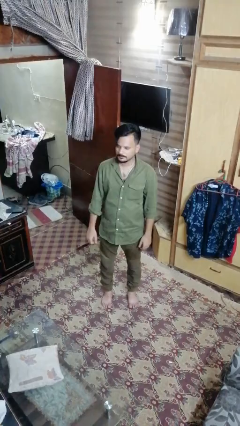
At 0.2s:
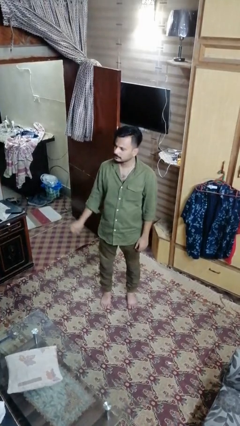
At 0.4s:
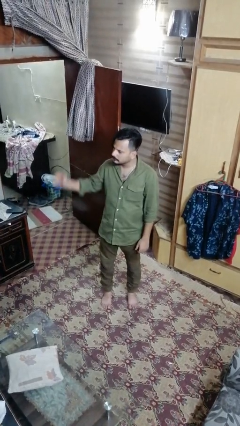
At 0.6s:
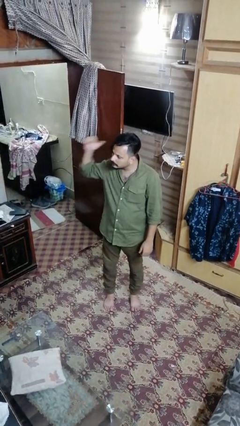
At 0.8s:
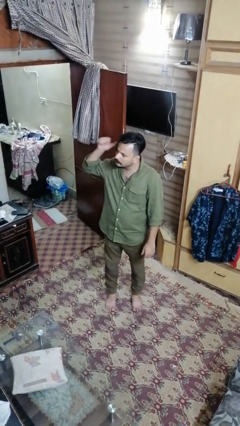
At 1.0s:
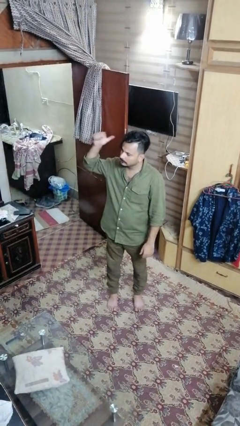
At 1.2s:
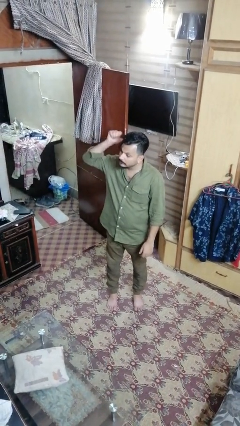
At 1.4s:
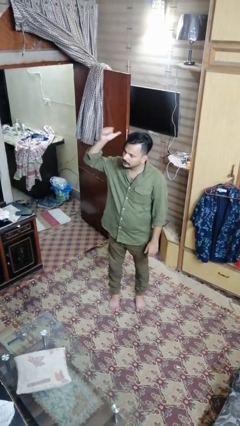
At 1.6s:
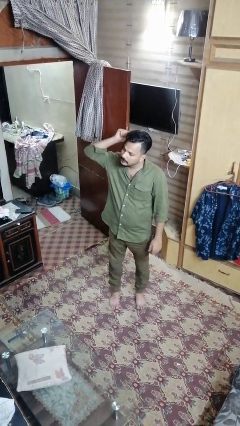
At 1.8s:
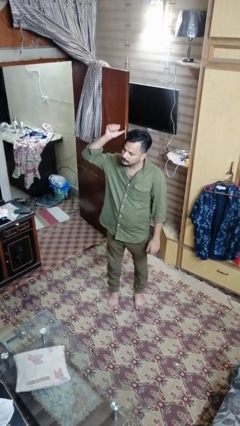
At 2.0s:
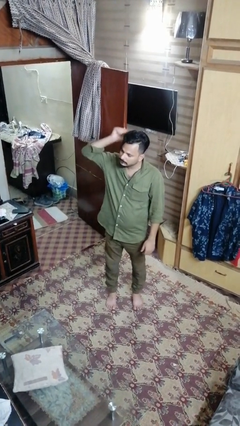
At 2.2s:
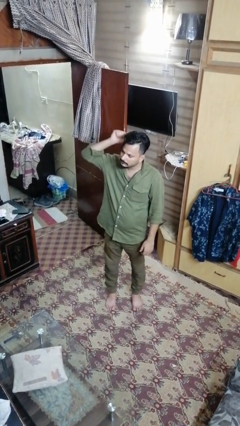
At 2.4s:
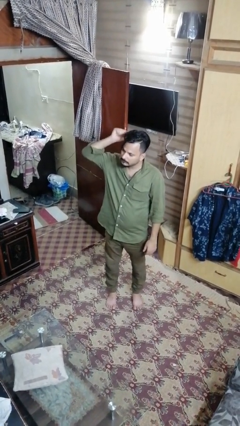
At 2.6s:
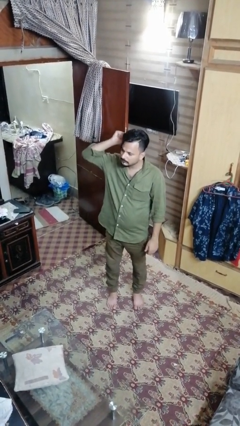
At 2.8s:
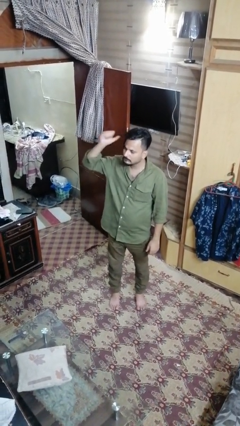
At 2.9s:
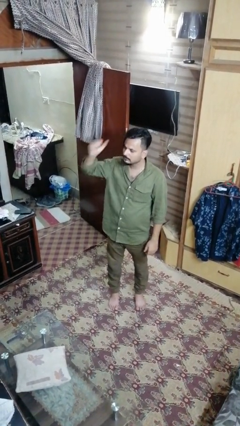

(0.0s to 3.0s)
person gestures behind me

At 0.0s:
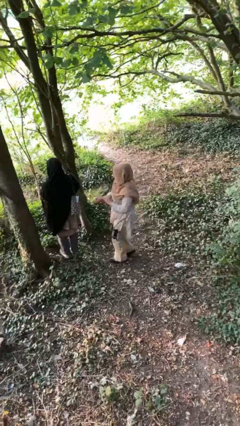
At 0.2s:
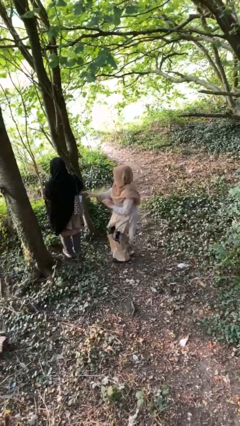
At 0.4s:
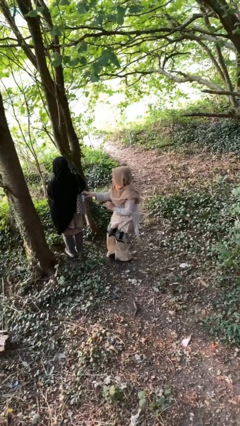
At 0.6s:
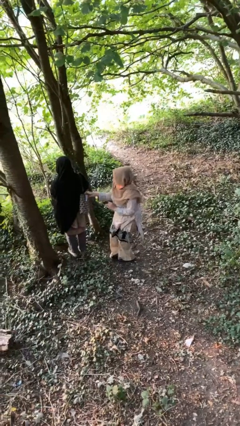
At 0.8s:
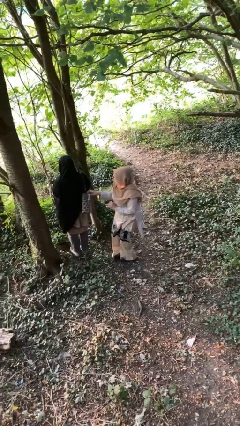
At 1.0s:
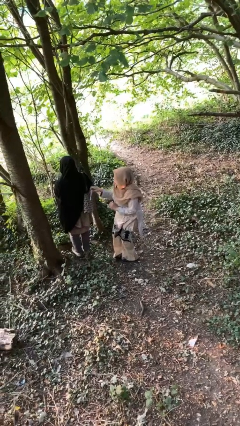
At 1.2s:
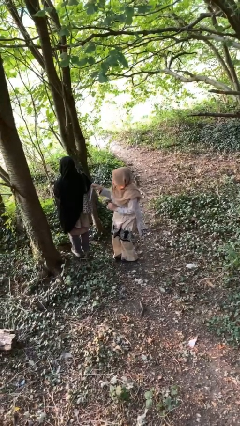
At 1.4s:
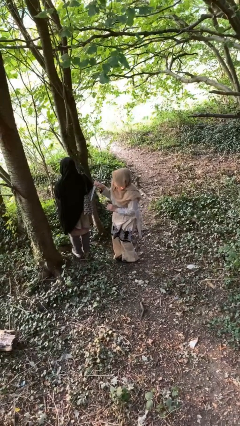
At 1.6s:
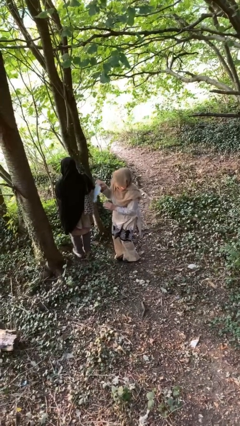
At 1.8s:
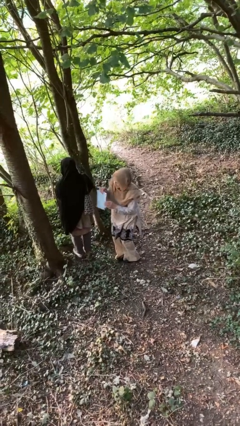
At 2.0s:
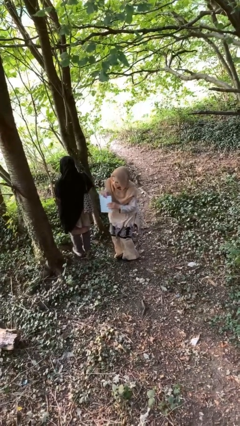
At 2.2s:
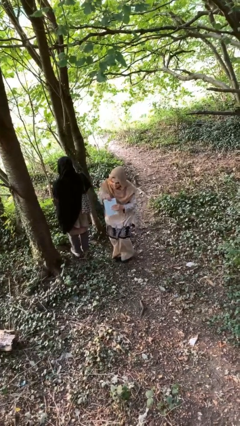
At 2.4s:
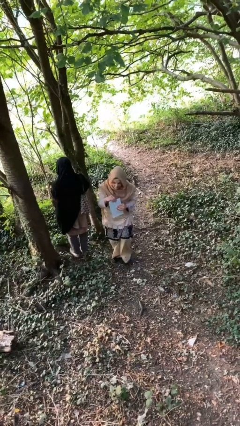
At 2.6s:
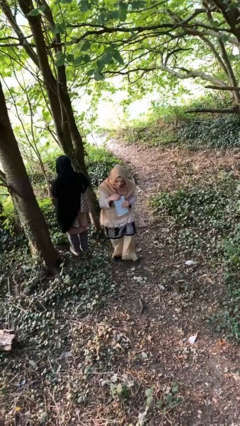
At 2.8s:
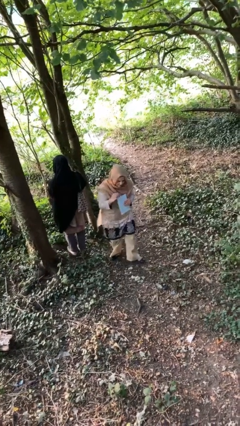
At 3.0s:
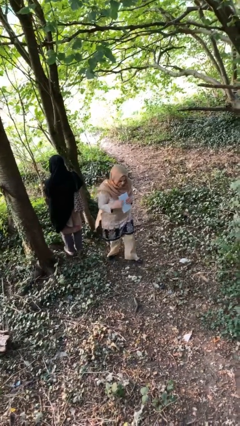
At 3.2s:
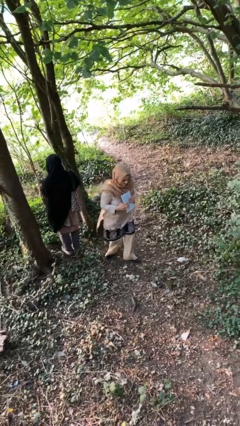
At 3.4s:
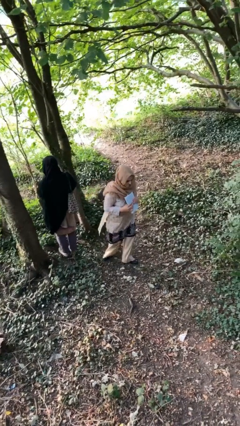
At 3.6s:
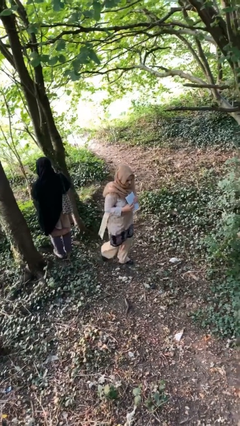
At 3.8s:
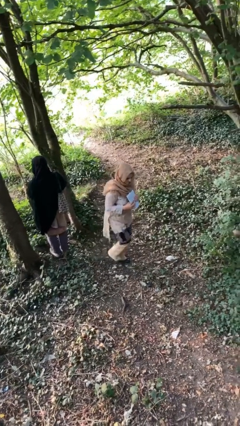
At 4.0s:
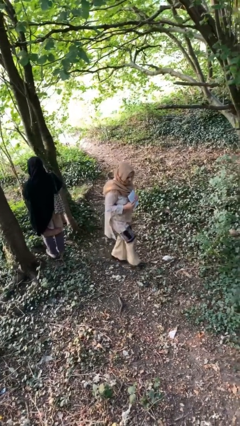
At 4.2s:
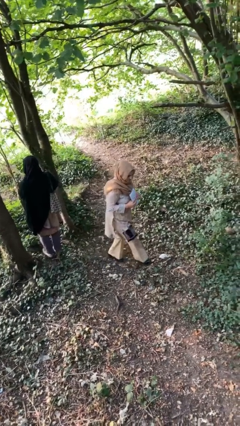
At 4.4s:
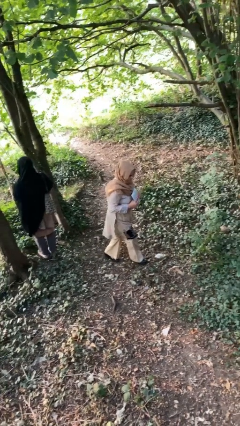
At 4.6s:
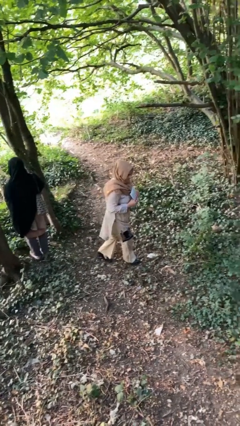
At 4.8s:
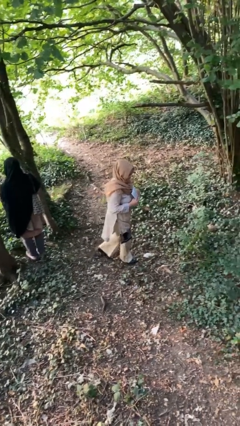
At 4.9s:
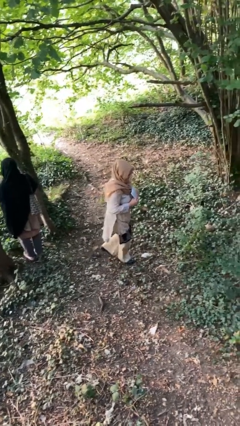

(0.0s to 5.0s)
person steals object from person

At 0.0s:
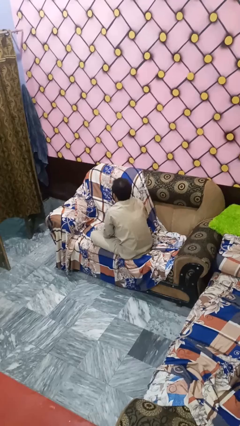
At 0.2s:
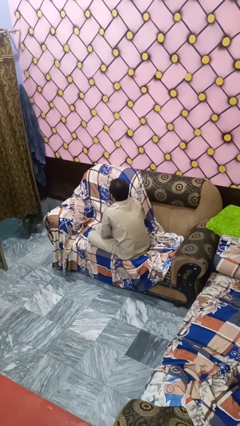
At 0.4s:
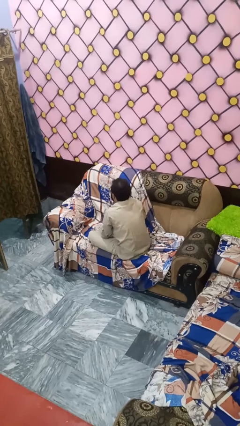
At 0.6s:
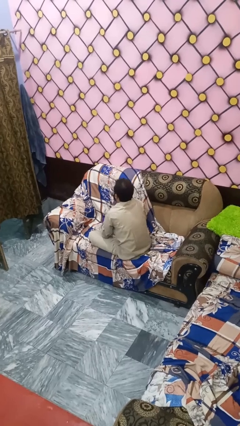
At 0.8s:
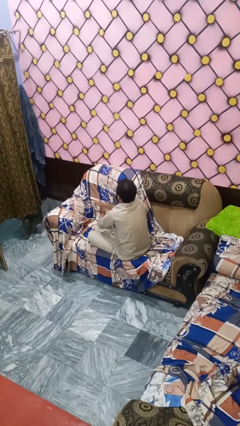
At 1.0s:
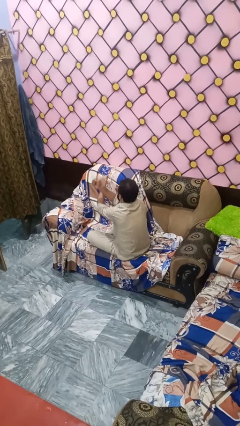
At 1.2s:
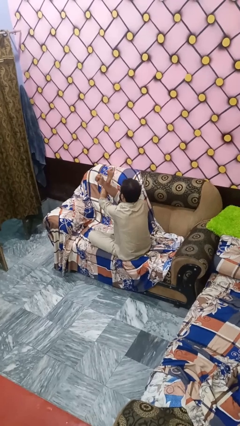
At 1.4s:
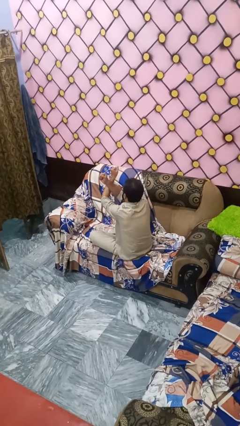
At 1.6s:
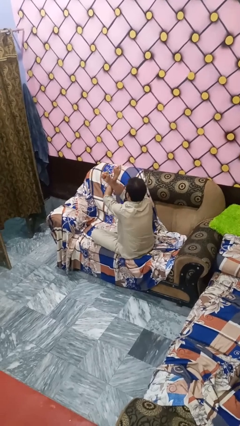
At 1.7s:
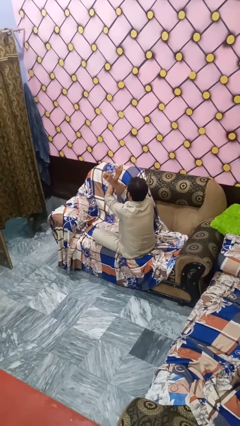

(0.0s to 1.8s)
person gestures arms x

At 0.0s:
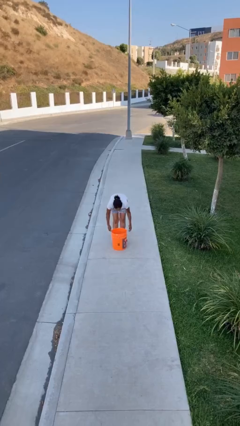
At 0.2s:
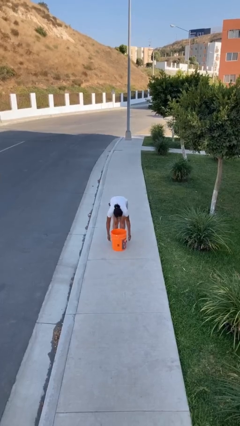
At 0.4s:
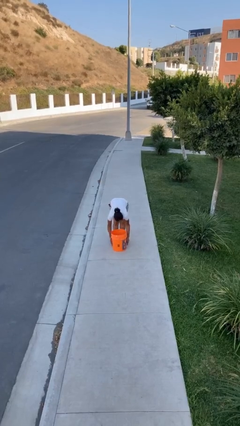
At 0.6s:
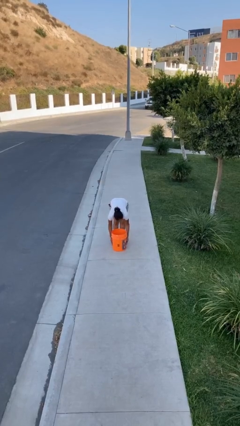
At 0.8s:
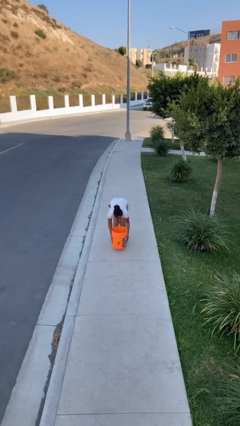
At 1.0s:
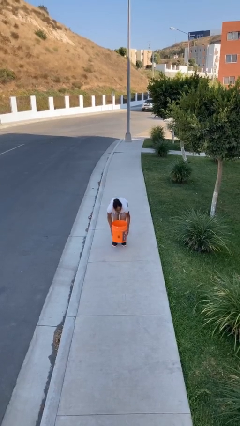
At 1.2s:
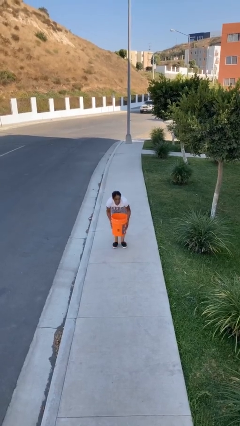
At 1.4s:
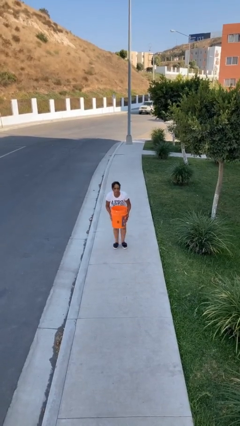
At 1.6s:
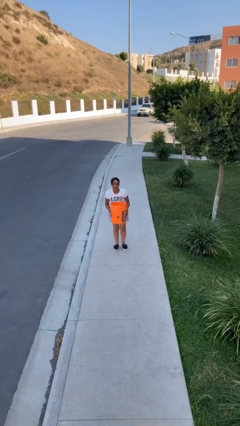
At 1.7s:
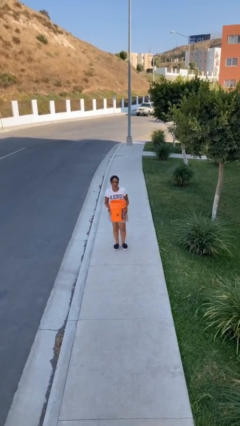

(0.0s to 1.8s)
person picks up object from floor

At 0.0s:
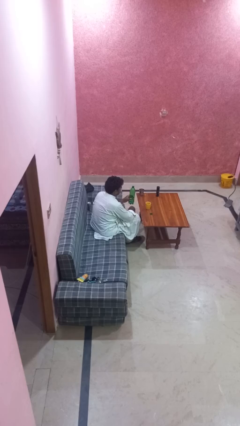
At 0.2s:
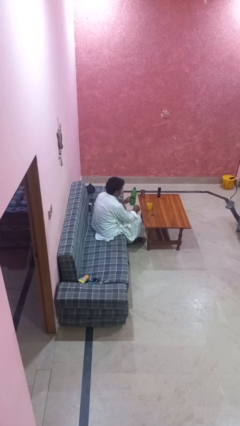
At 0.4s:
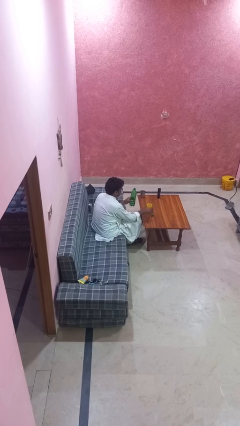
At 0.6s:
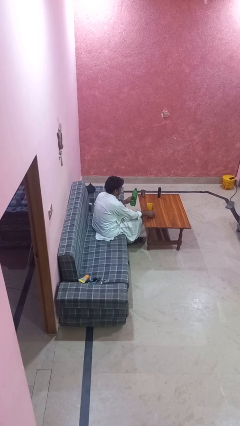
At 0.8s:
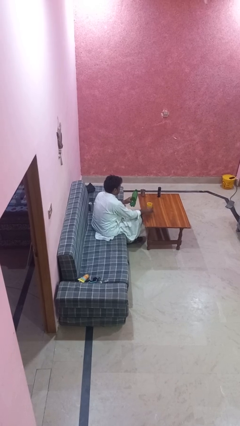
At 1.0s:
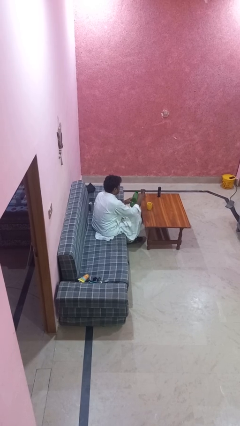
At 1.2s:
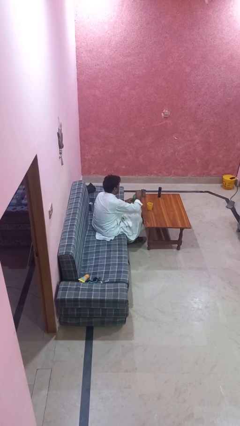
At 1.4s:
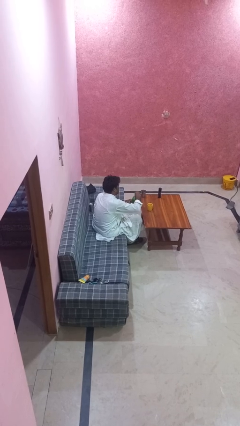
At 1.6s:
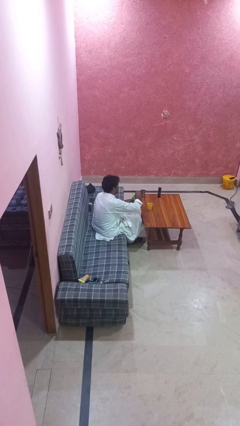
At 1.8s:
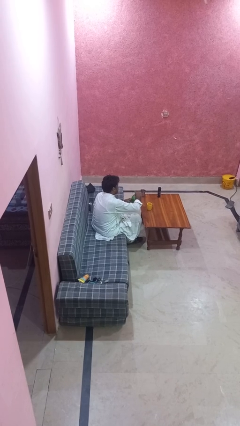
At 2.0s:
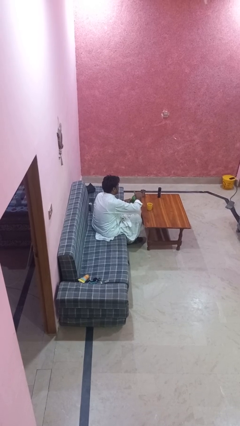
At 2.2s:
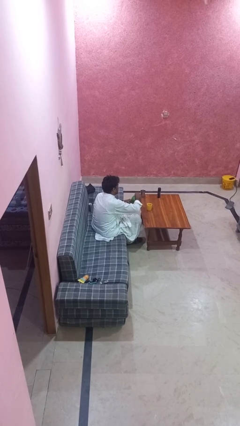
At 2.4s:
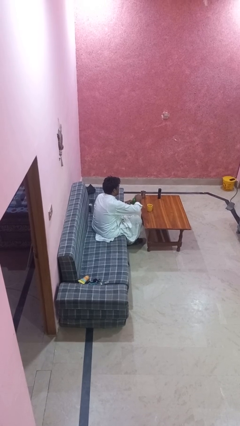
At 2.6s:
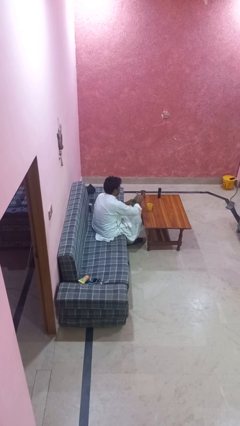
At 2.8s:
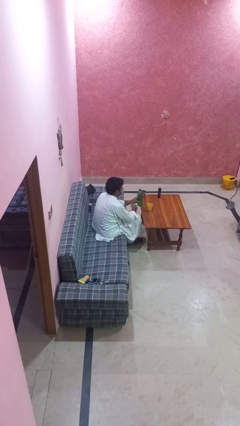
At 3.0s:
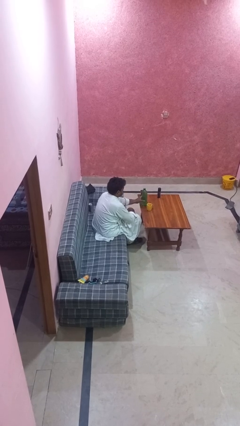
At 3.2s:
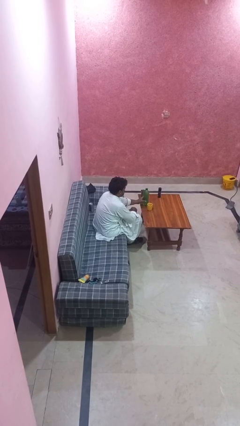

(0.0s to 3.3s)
person screws lid to bottle

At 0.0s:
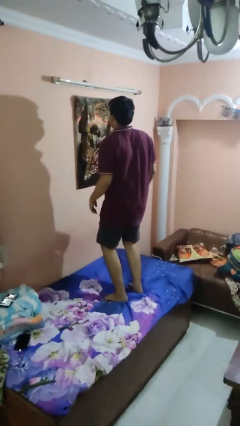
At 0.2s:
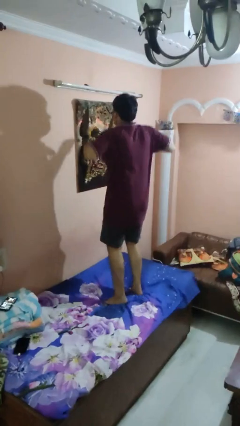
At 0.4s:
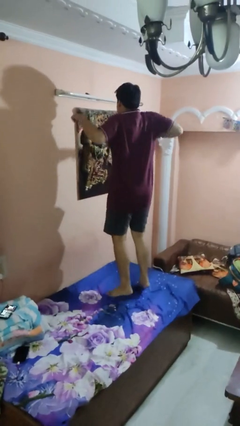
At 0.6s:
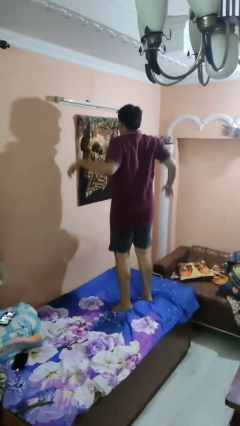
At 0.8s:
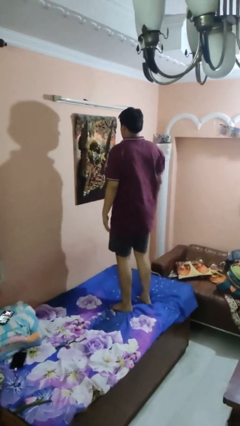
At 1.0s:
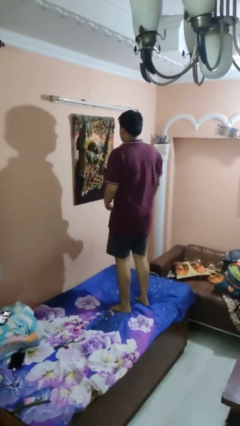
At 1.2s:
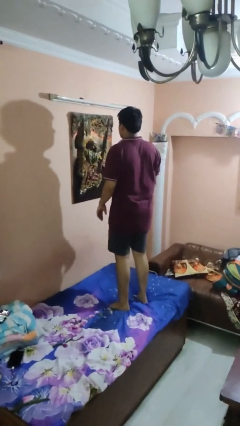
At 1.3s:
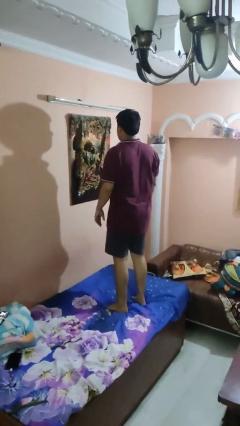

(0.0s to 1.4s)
person jumps on bed

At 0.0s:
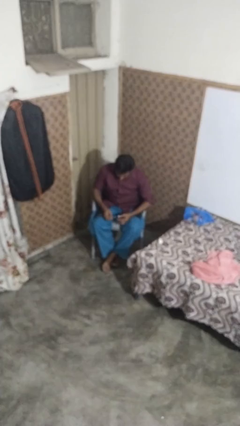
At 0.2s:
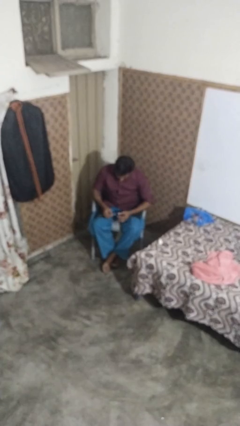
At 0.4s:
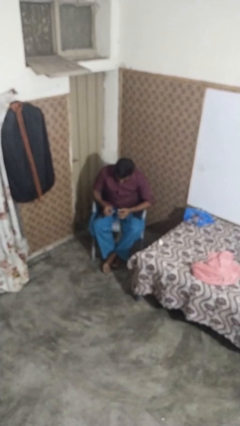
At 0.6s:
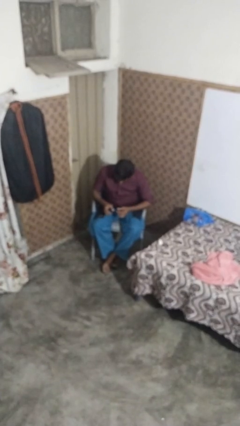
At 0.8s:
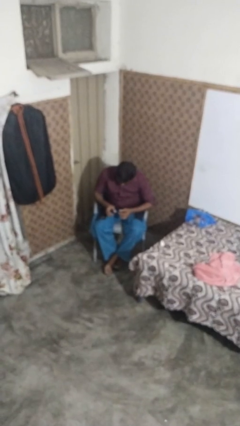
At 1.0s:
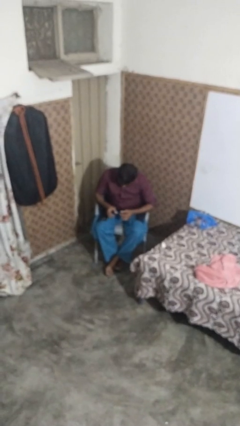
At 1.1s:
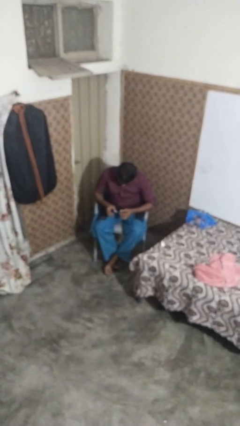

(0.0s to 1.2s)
person paints fingernails
